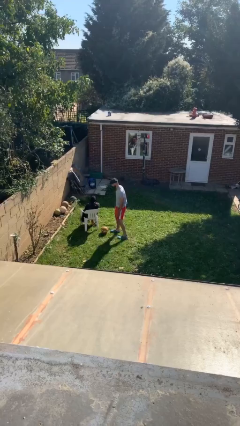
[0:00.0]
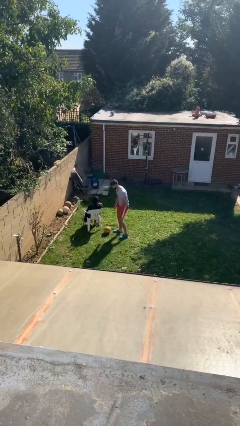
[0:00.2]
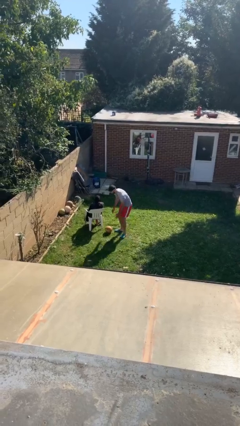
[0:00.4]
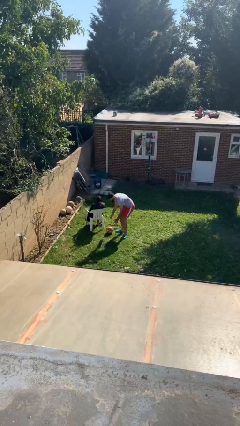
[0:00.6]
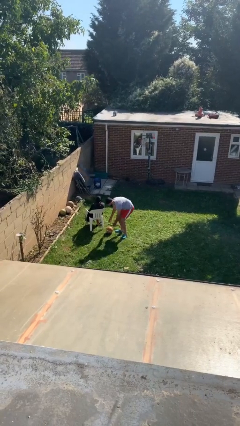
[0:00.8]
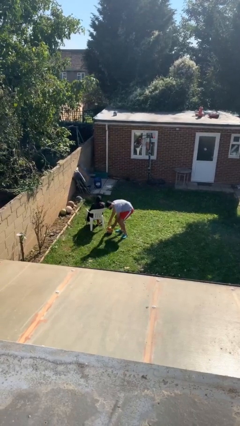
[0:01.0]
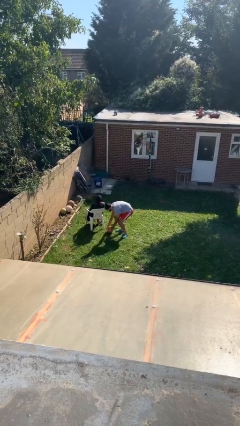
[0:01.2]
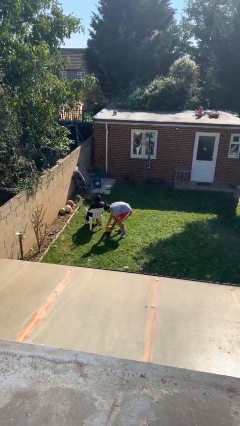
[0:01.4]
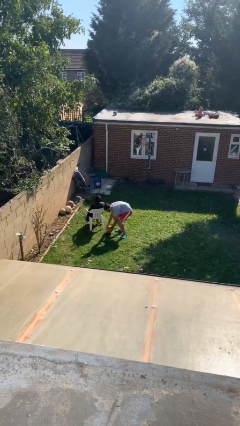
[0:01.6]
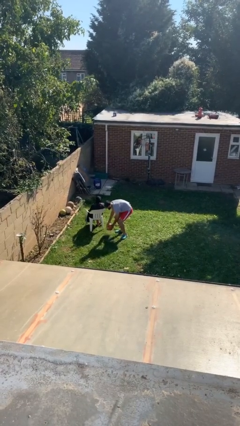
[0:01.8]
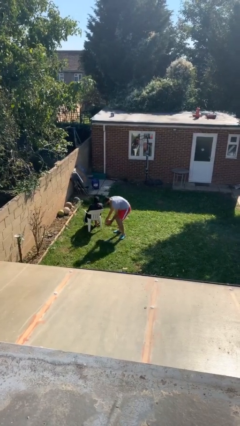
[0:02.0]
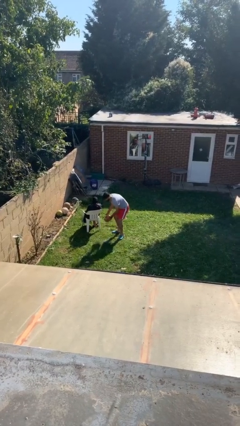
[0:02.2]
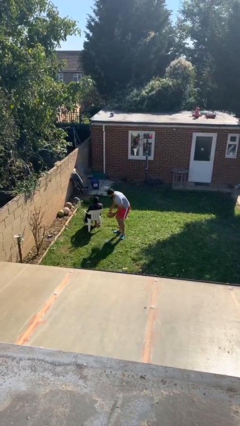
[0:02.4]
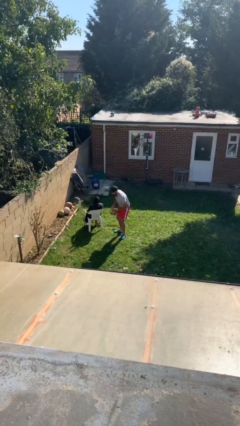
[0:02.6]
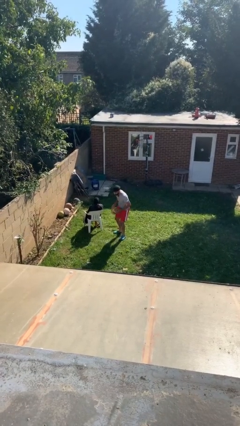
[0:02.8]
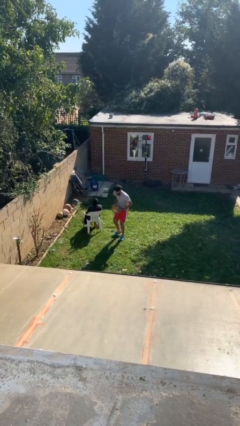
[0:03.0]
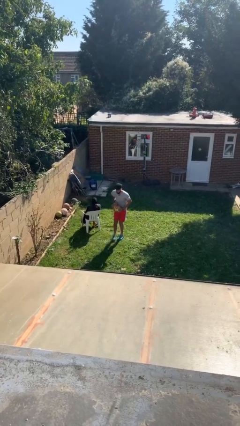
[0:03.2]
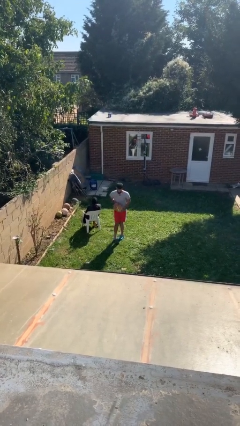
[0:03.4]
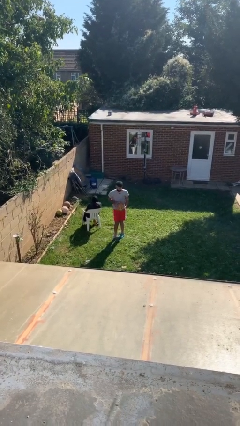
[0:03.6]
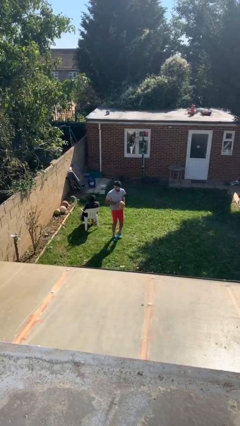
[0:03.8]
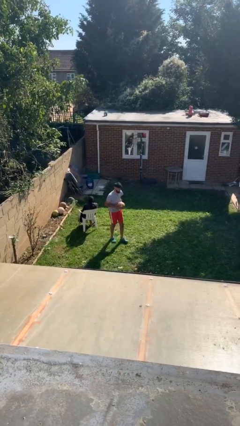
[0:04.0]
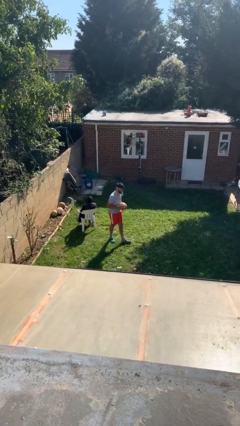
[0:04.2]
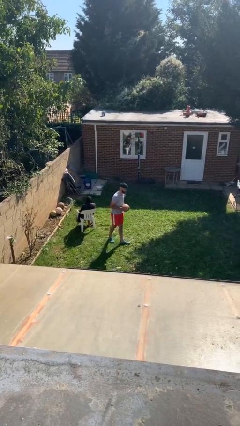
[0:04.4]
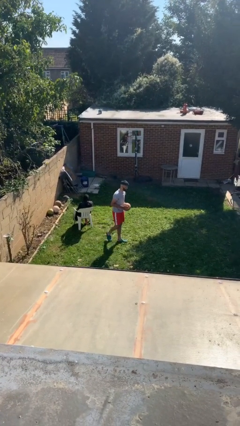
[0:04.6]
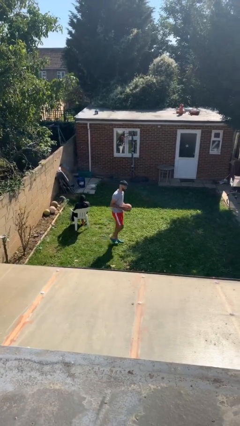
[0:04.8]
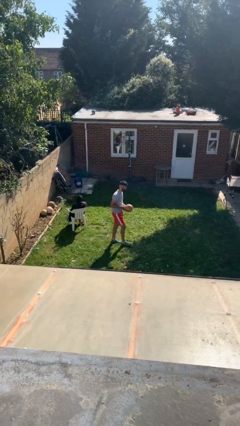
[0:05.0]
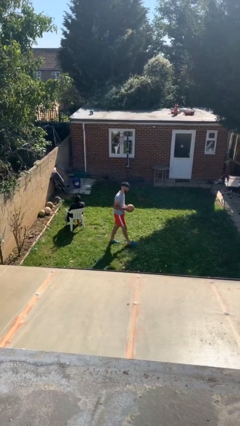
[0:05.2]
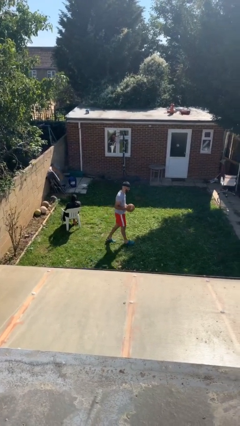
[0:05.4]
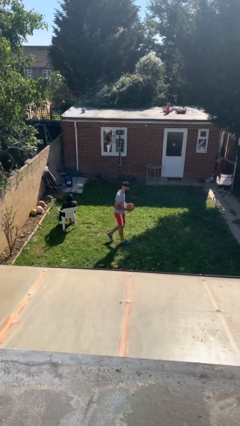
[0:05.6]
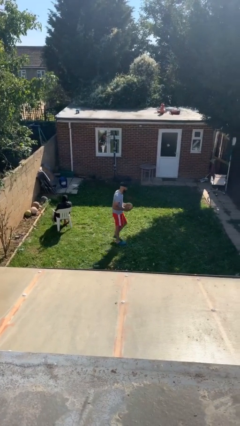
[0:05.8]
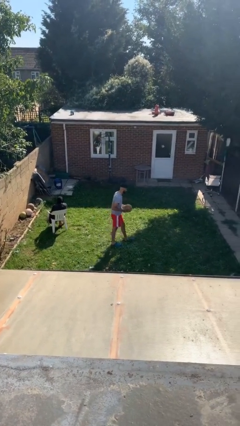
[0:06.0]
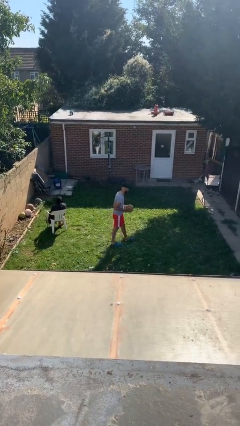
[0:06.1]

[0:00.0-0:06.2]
person steals object from person

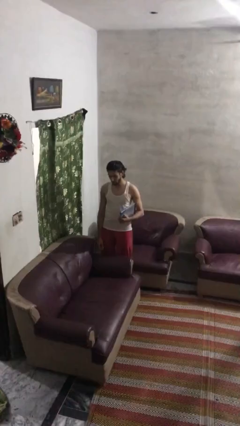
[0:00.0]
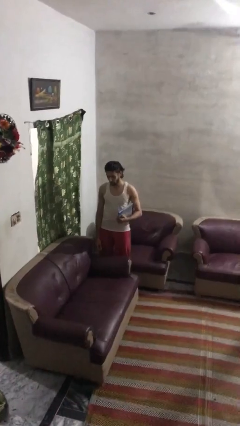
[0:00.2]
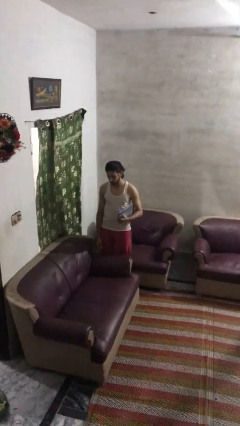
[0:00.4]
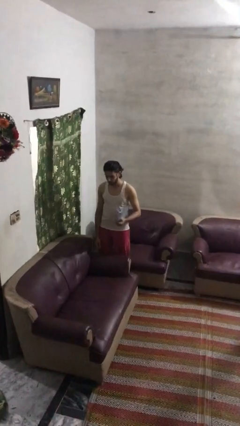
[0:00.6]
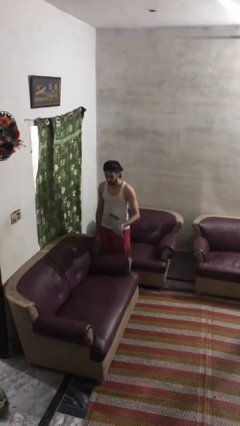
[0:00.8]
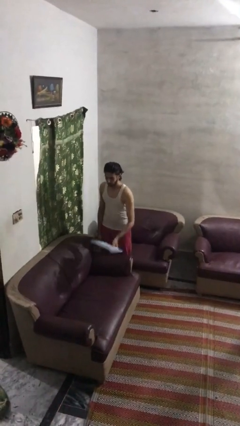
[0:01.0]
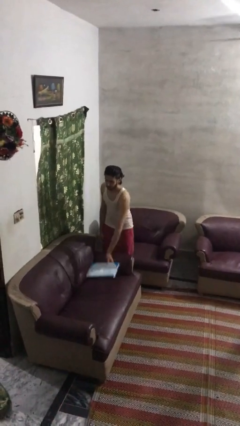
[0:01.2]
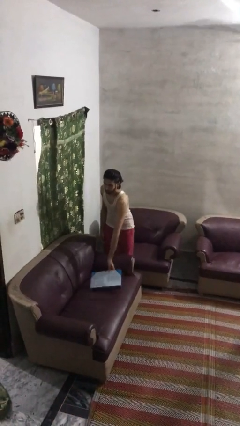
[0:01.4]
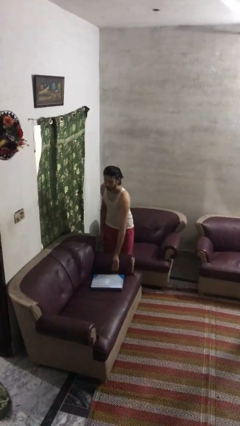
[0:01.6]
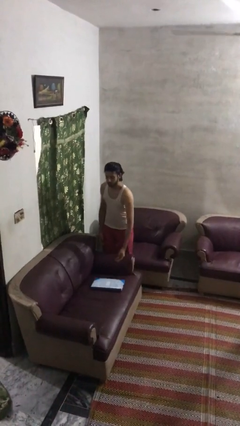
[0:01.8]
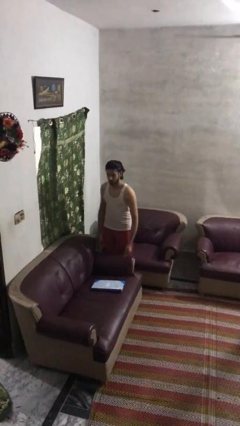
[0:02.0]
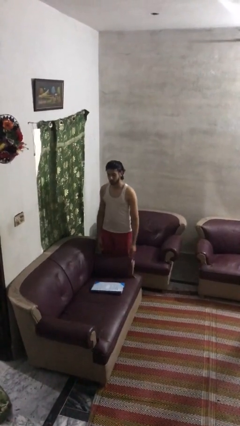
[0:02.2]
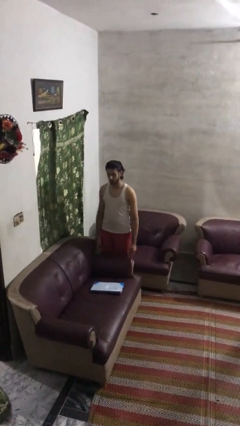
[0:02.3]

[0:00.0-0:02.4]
person puts down object on couch

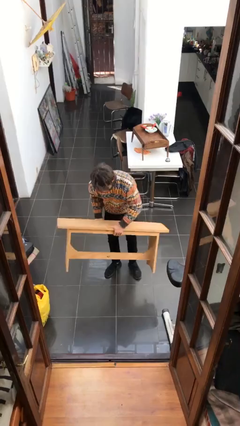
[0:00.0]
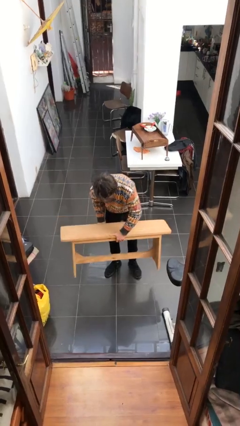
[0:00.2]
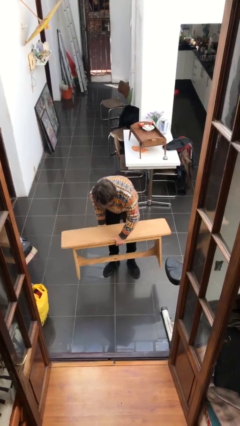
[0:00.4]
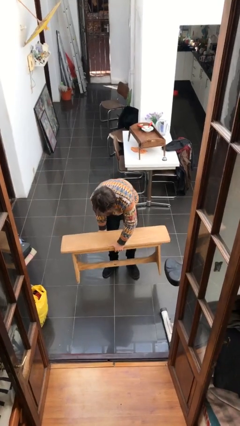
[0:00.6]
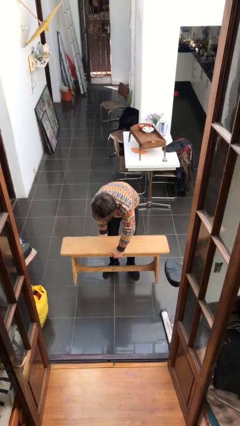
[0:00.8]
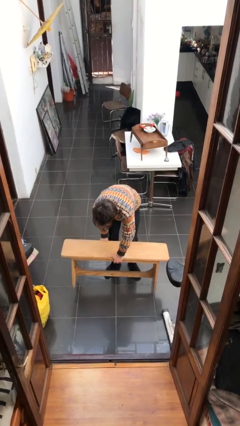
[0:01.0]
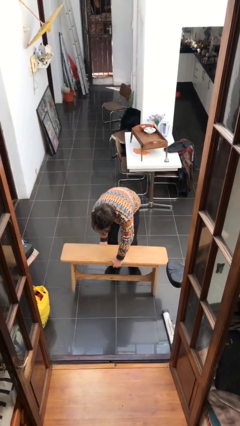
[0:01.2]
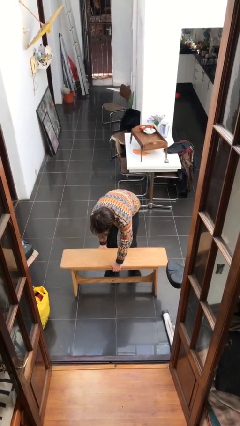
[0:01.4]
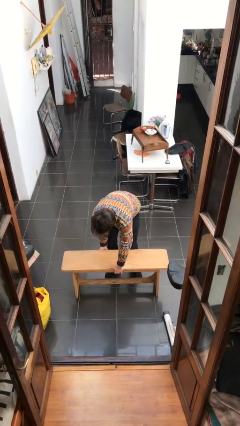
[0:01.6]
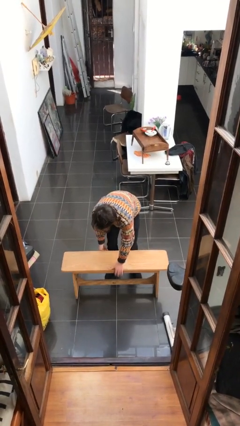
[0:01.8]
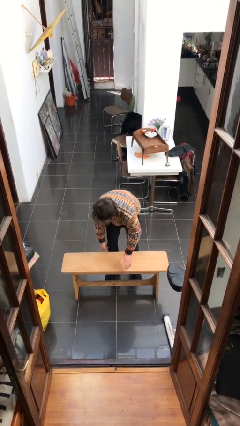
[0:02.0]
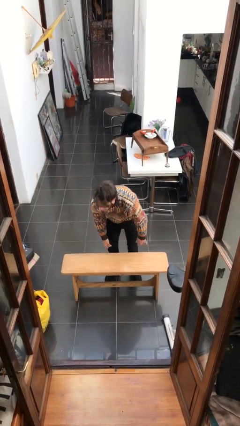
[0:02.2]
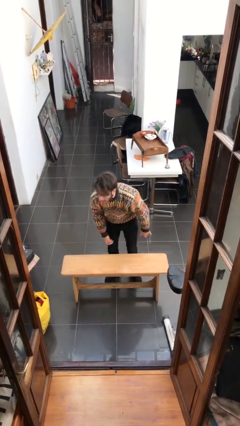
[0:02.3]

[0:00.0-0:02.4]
person puts down object on floor

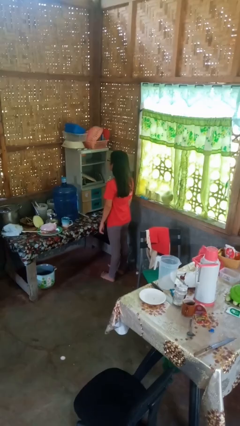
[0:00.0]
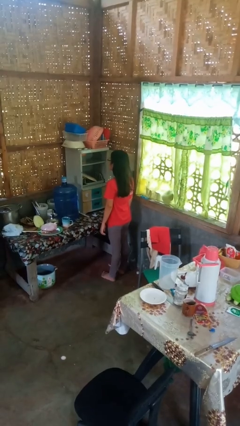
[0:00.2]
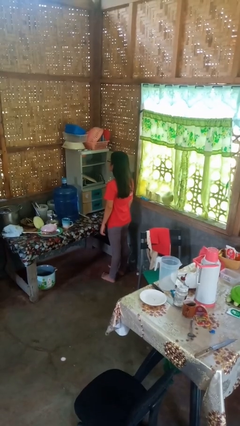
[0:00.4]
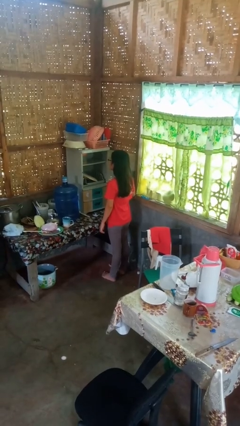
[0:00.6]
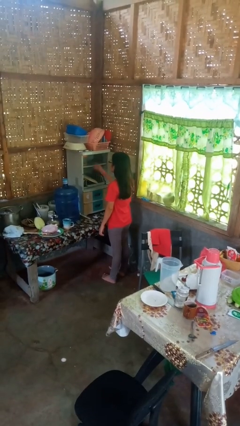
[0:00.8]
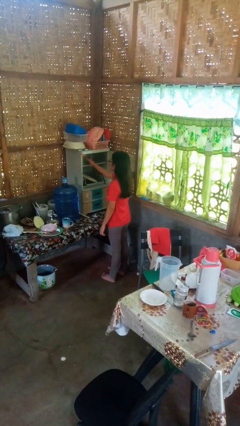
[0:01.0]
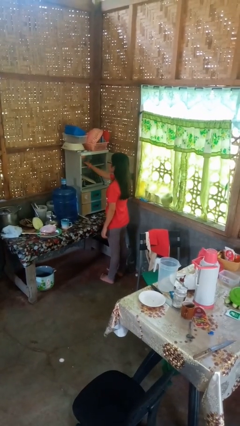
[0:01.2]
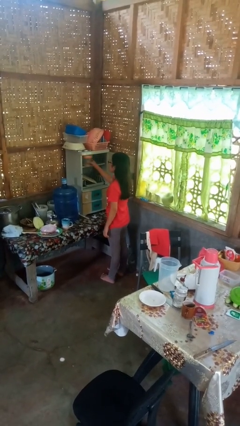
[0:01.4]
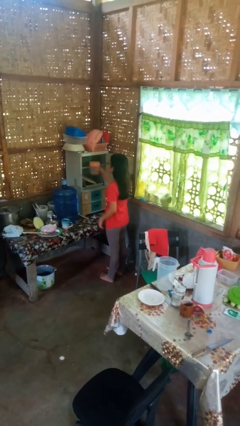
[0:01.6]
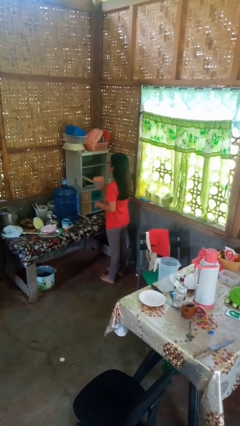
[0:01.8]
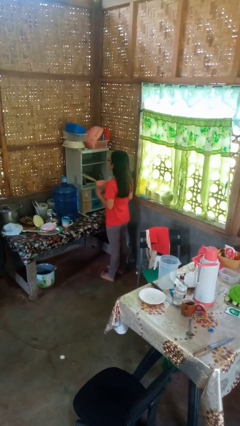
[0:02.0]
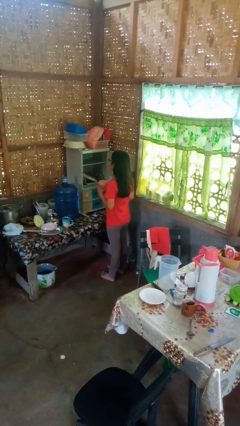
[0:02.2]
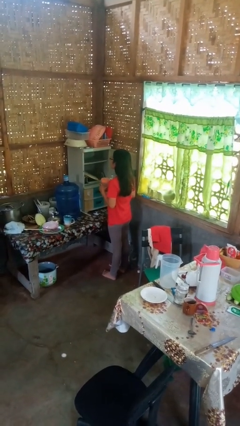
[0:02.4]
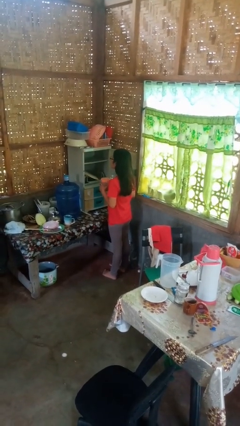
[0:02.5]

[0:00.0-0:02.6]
person picks up object from cabinet

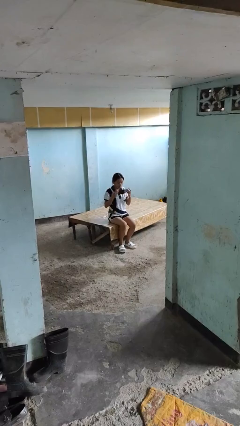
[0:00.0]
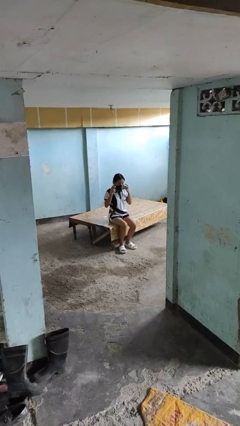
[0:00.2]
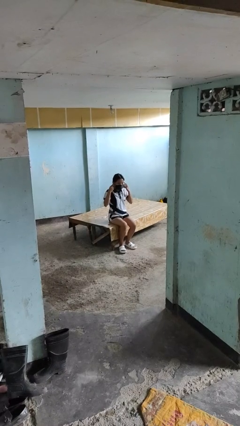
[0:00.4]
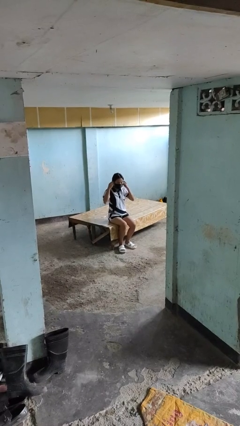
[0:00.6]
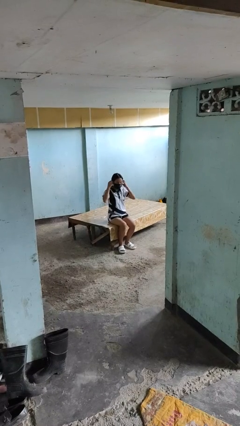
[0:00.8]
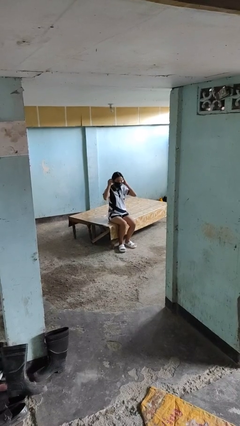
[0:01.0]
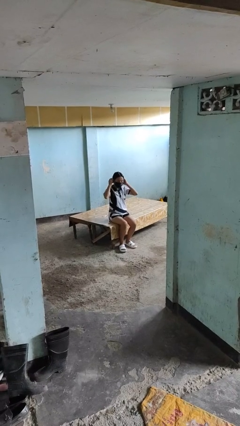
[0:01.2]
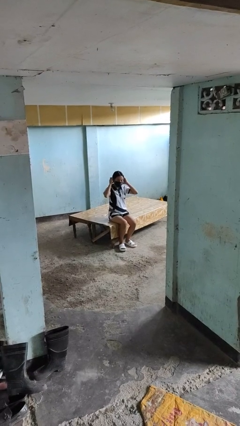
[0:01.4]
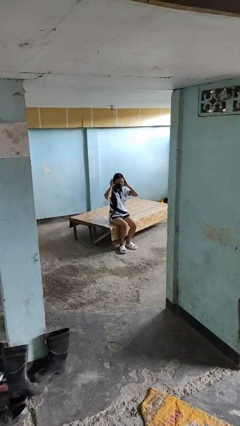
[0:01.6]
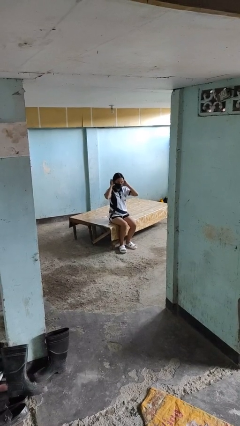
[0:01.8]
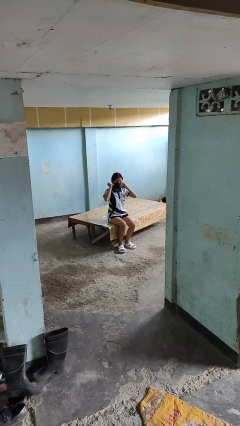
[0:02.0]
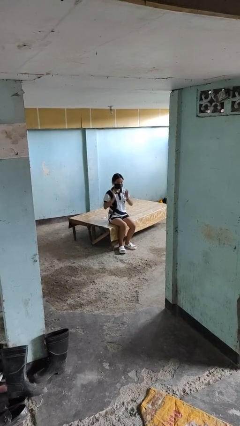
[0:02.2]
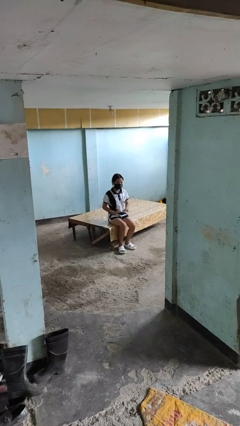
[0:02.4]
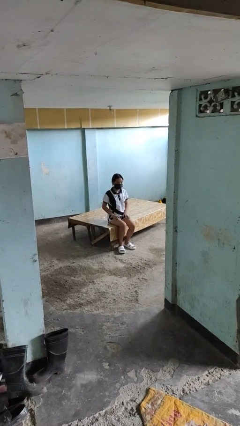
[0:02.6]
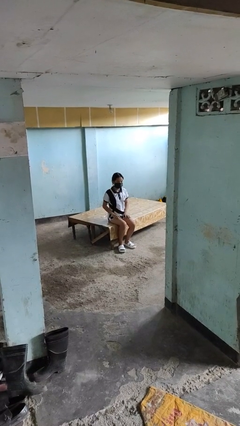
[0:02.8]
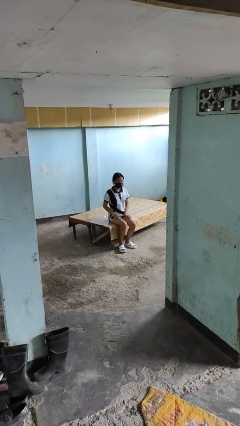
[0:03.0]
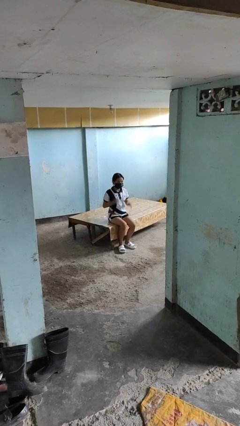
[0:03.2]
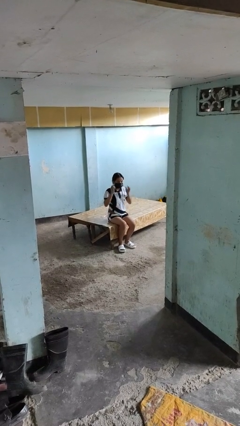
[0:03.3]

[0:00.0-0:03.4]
person puts on facemask

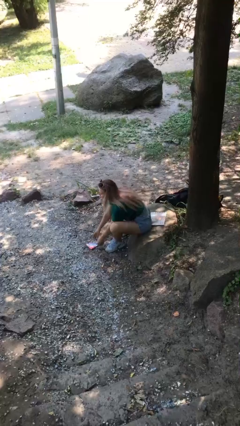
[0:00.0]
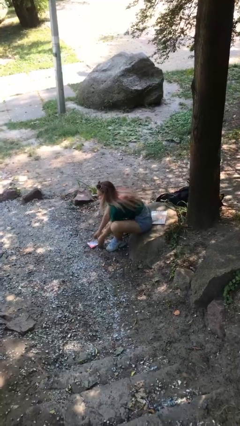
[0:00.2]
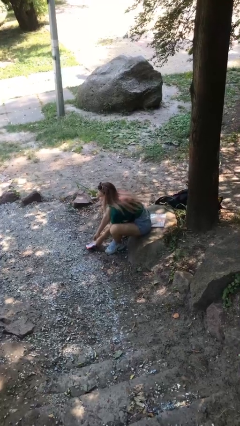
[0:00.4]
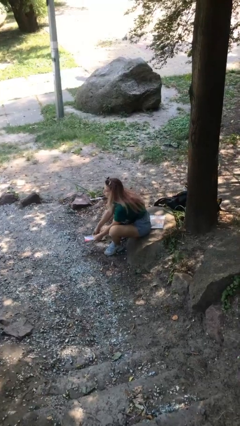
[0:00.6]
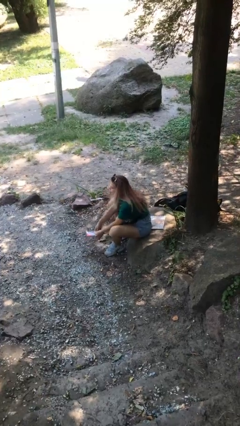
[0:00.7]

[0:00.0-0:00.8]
person picks up object from floor
